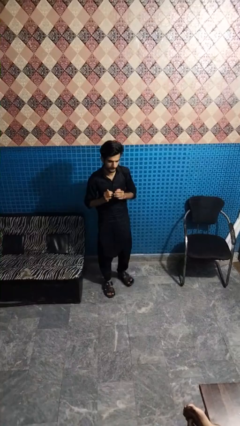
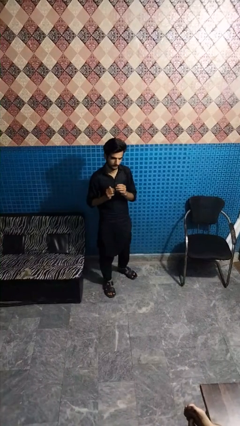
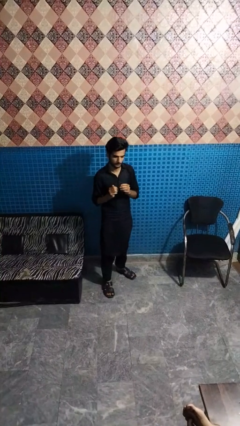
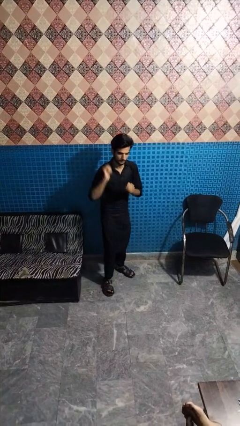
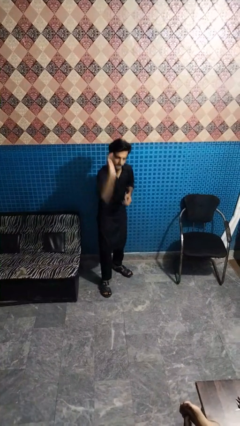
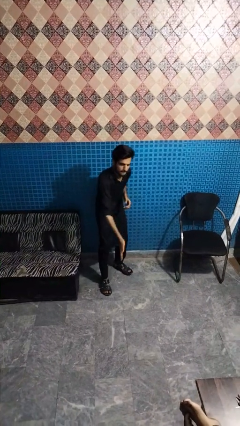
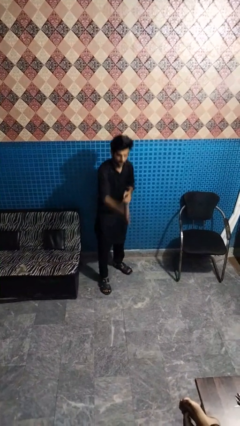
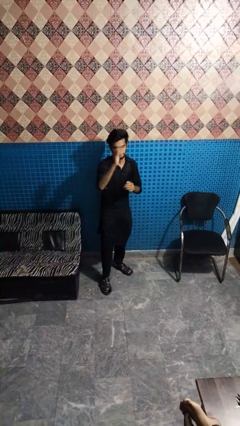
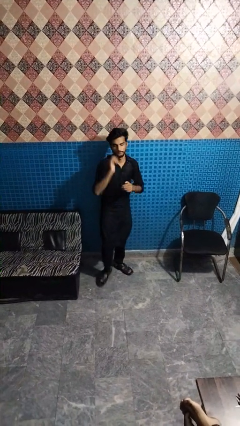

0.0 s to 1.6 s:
person karate chop

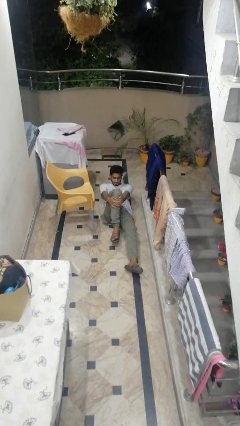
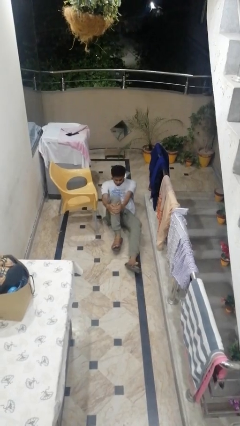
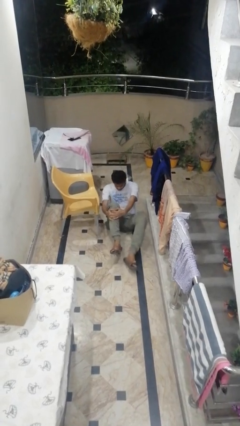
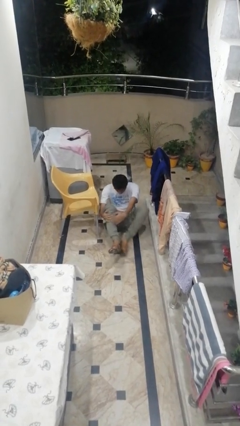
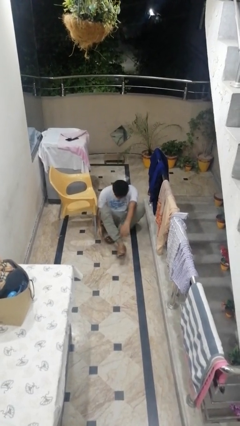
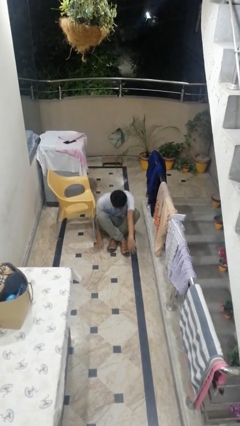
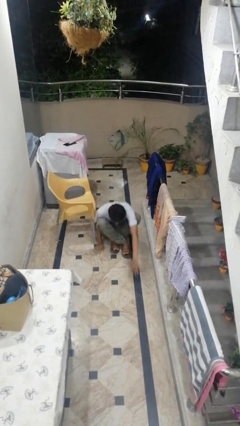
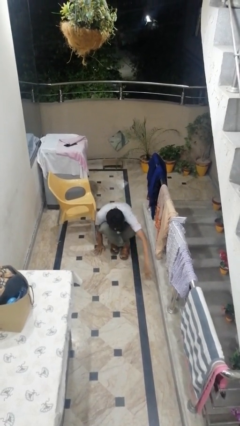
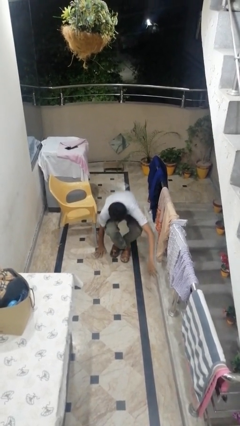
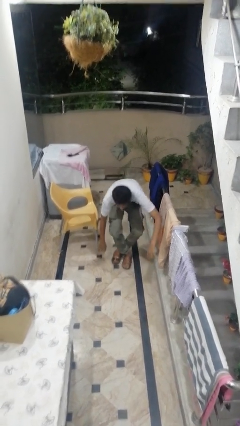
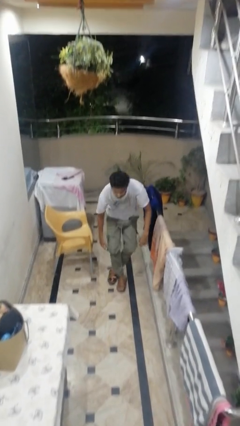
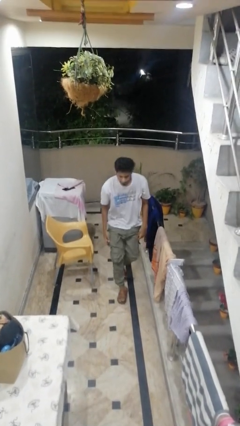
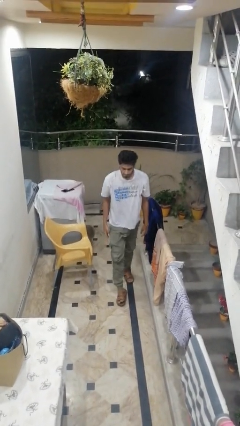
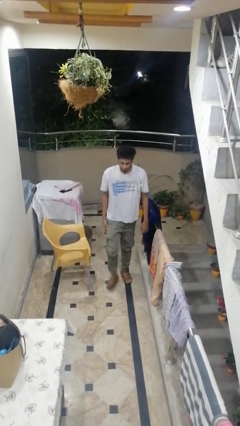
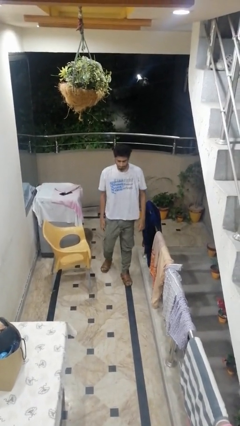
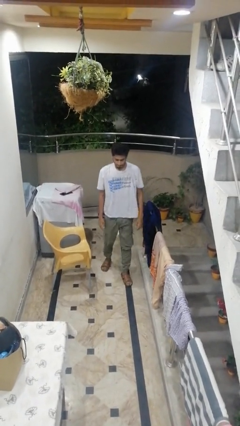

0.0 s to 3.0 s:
person stands up from floor

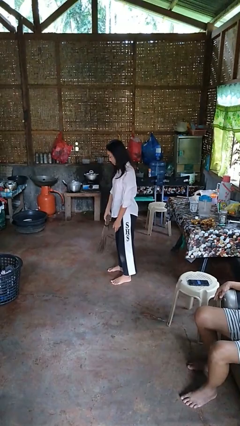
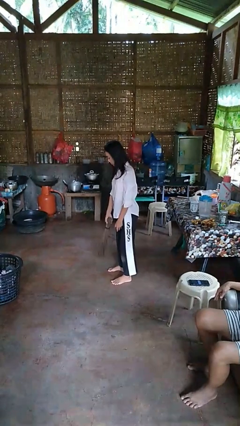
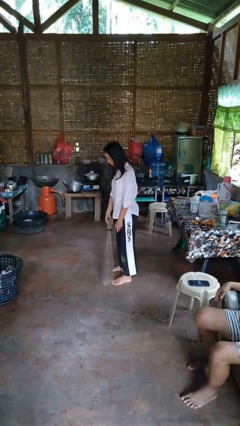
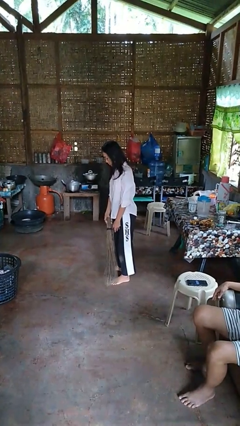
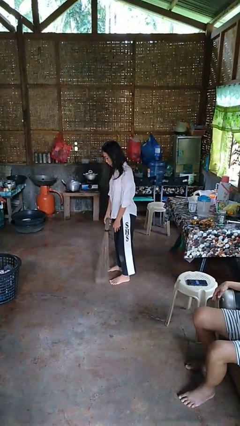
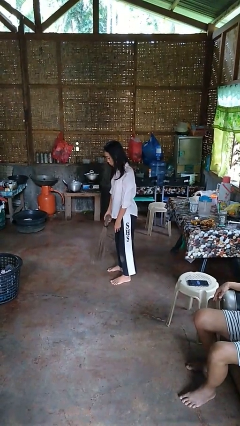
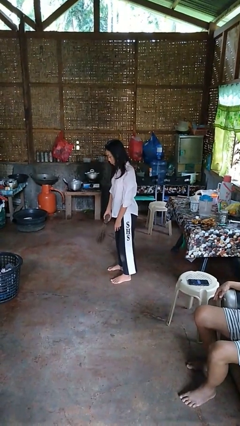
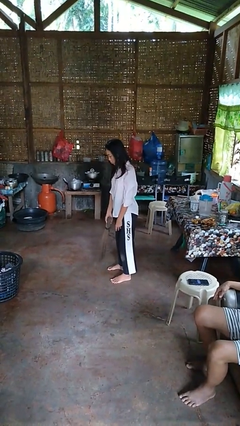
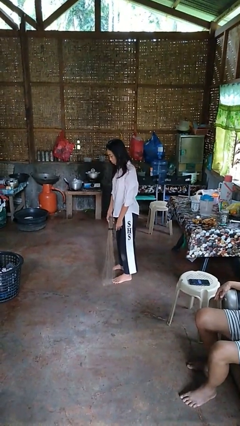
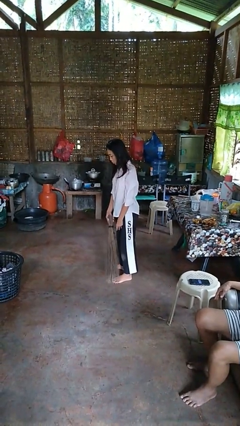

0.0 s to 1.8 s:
person sweeps floor

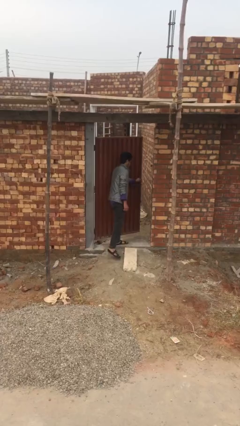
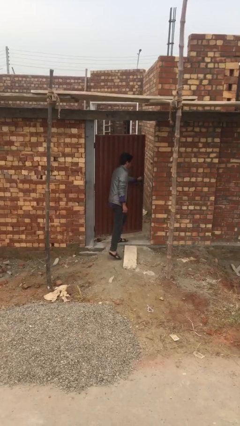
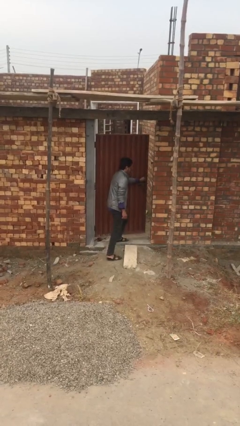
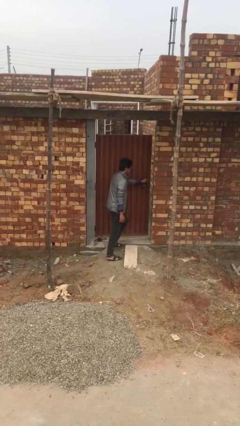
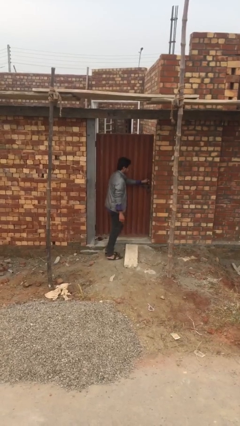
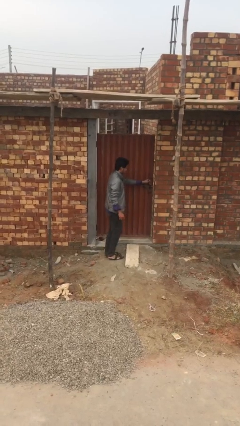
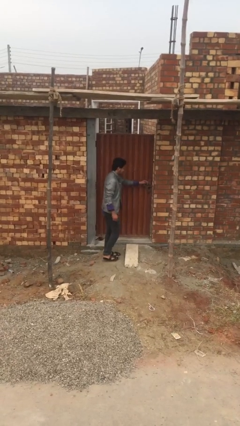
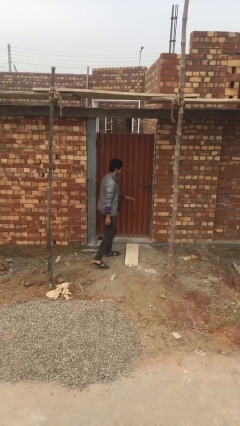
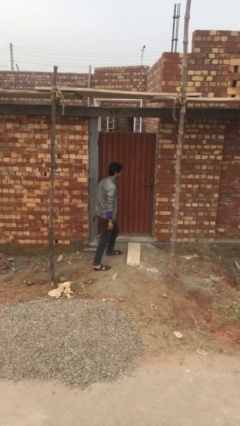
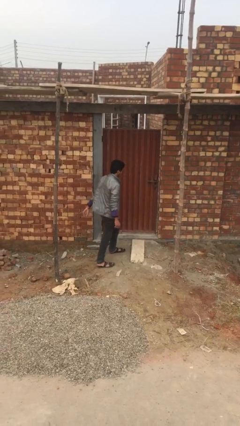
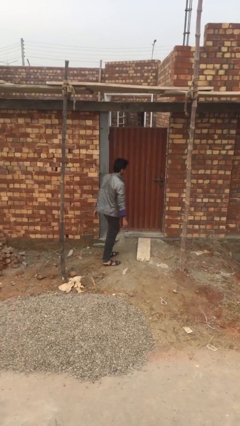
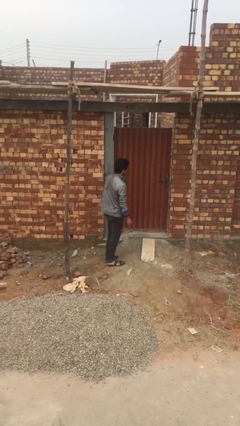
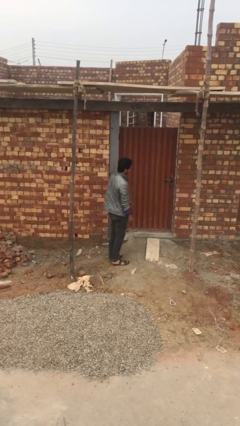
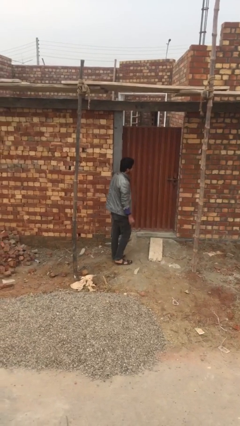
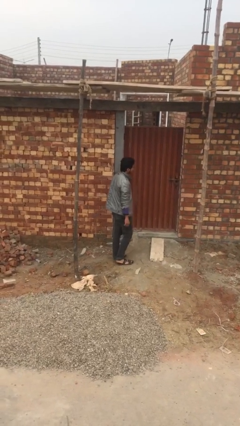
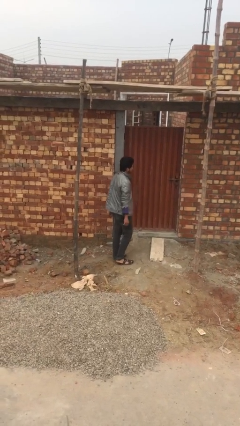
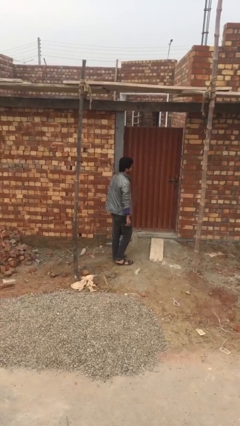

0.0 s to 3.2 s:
person closes facility door

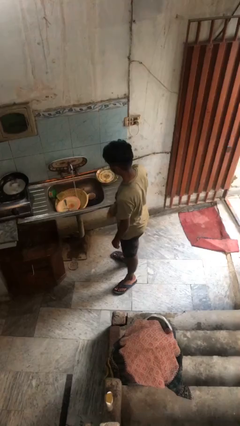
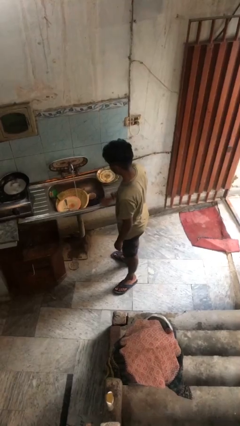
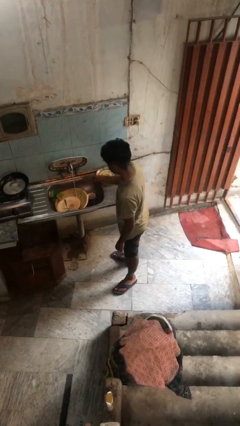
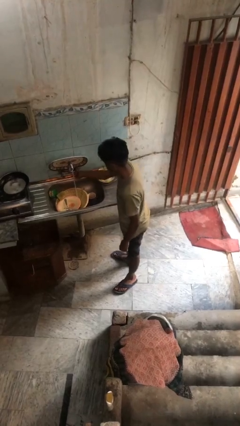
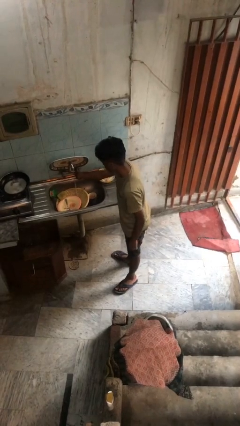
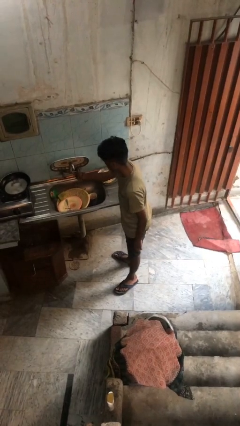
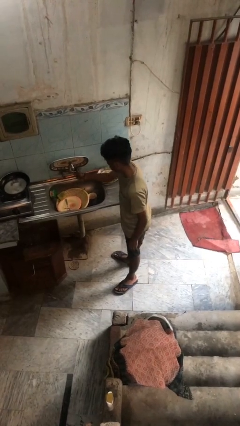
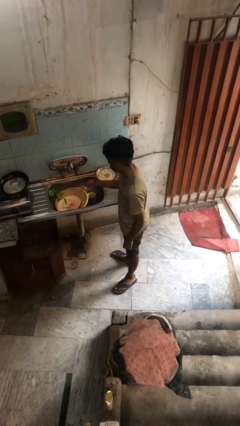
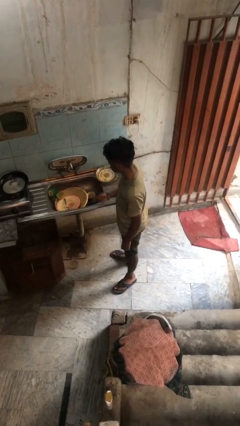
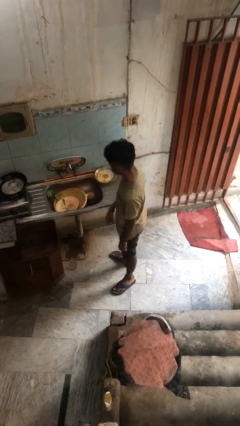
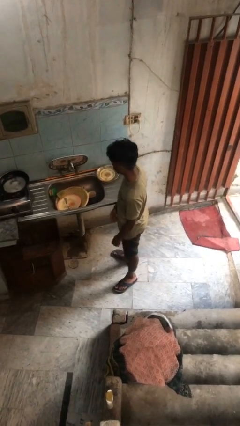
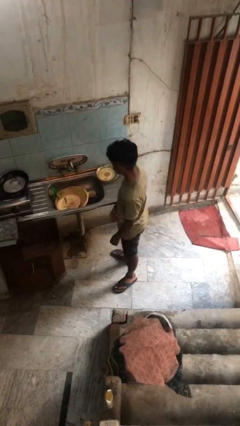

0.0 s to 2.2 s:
person turns off faucet

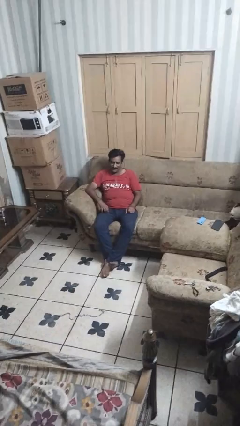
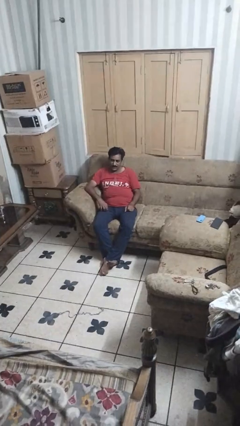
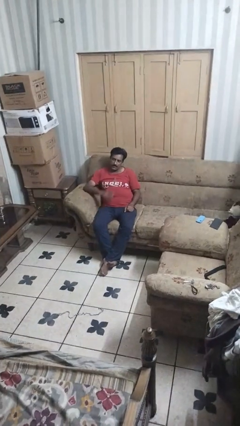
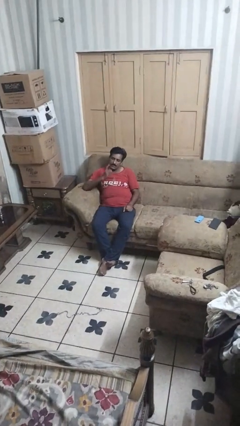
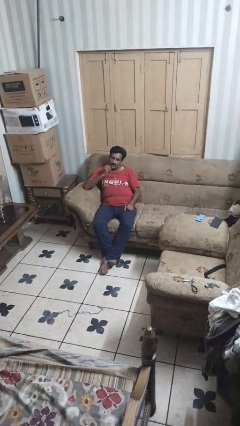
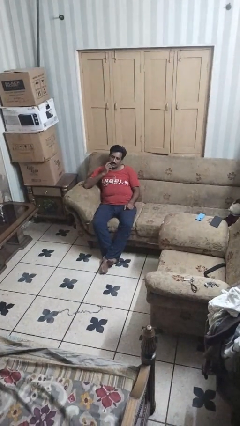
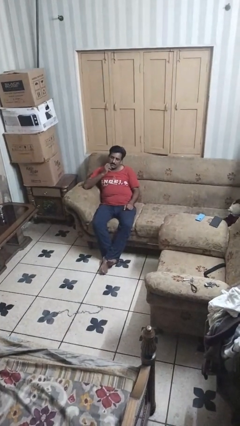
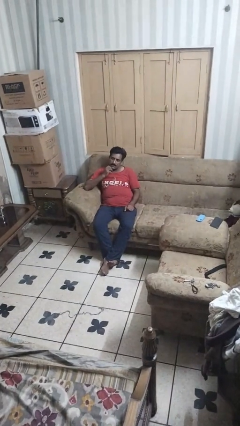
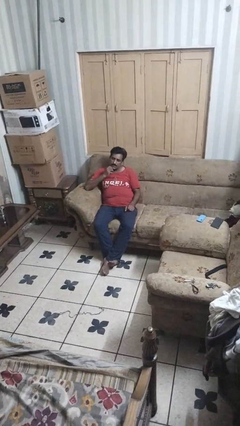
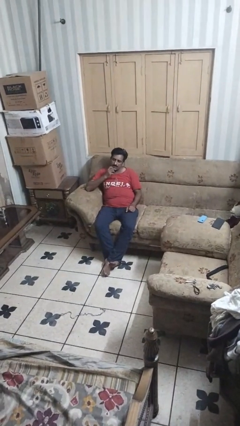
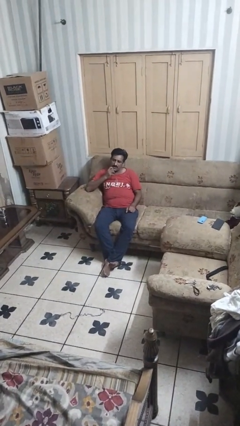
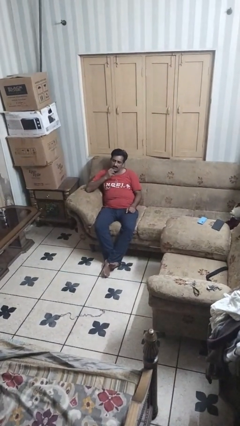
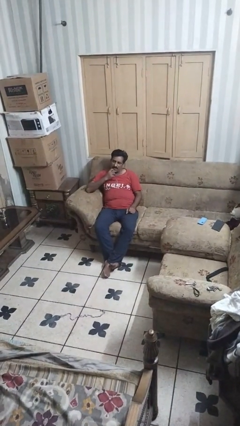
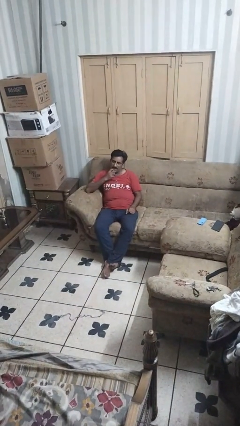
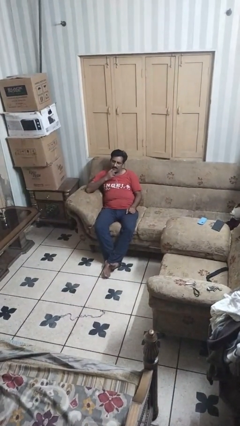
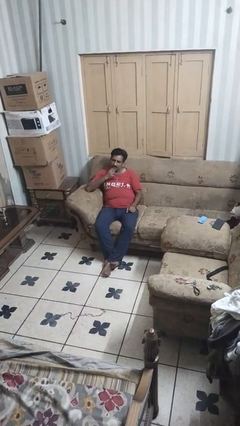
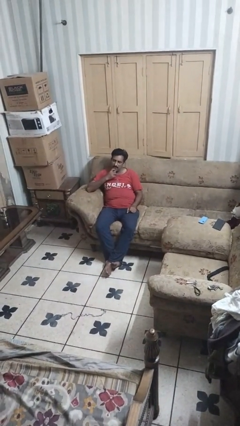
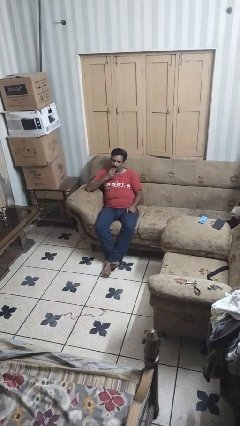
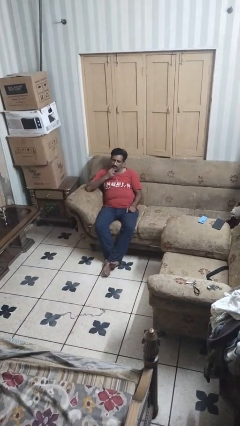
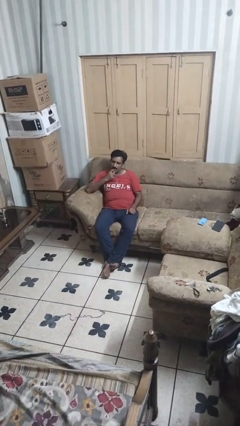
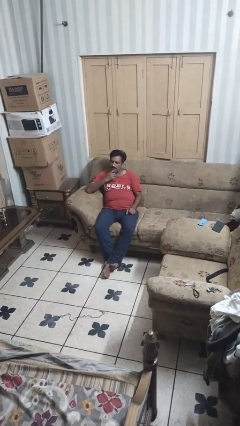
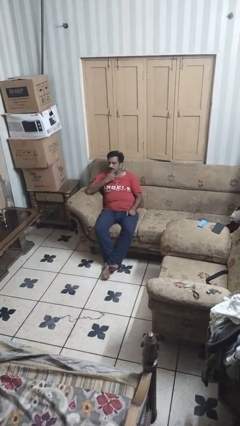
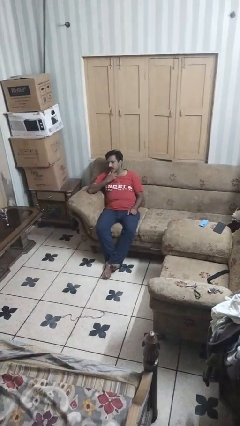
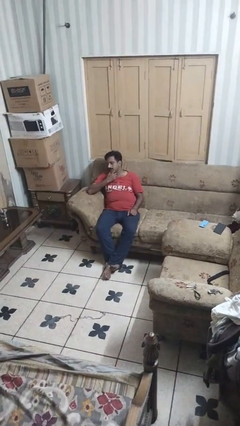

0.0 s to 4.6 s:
person strokes chin

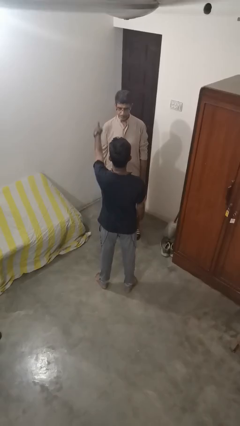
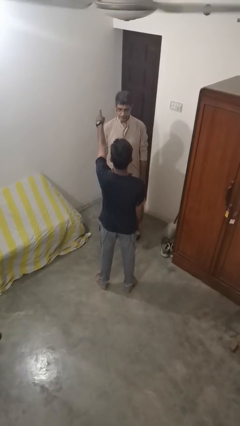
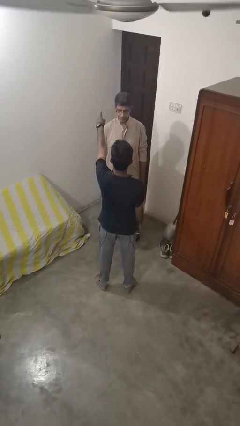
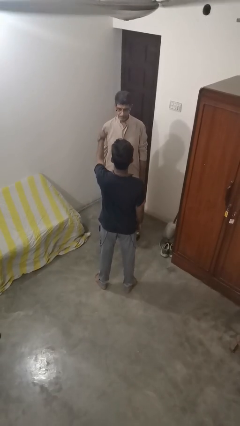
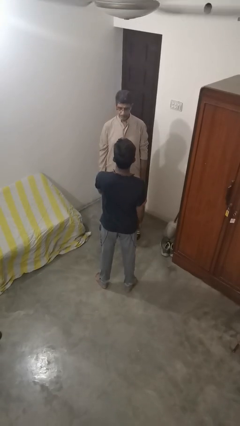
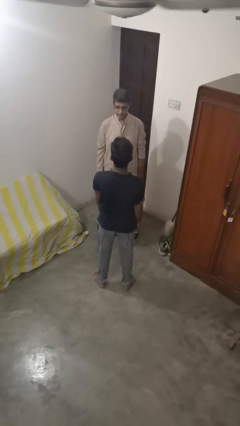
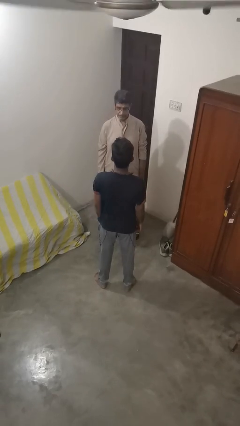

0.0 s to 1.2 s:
person shoves person
